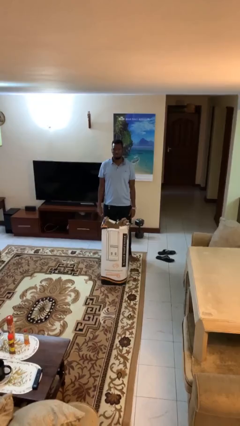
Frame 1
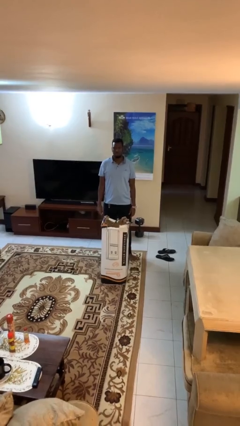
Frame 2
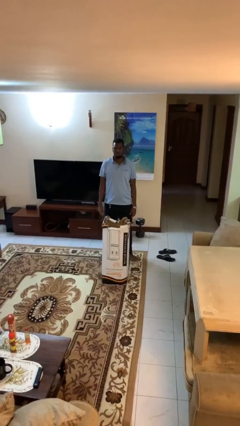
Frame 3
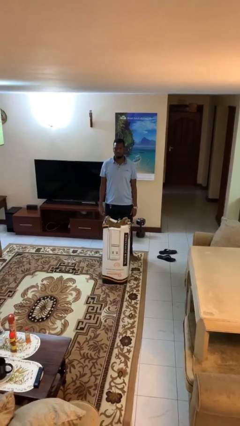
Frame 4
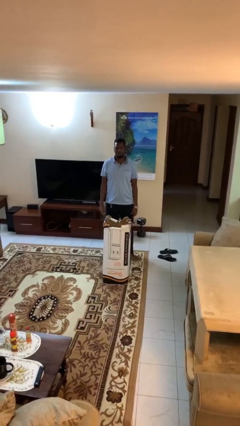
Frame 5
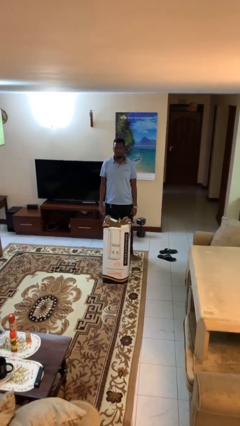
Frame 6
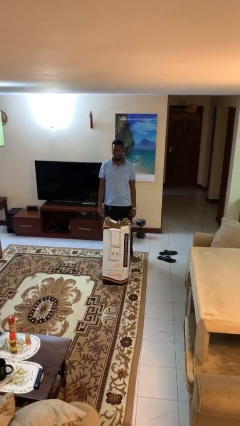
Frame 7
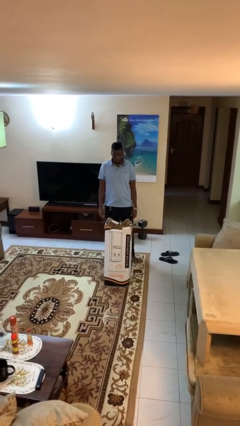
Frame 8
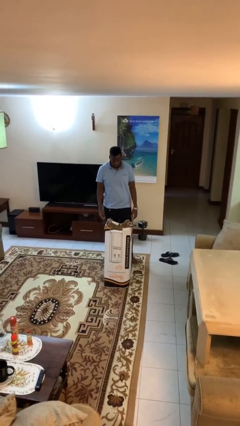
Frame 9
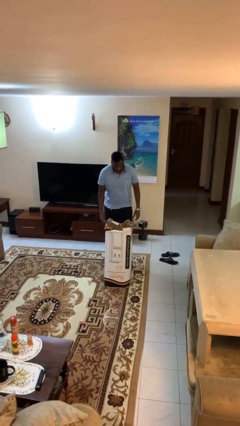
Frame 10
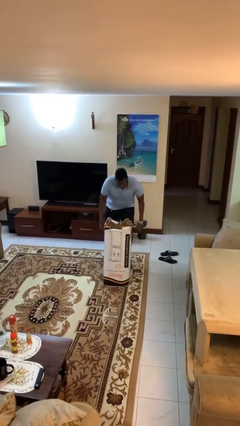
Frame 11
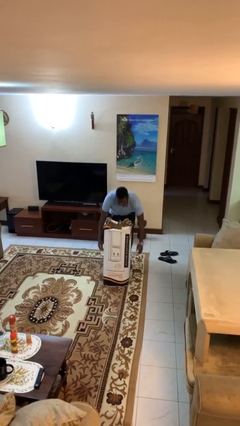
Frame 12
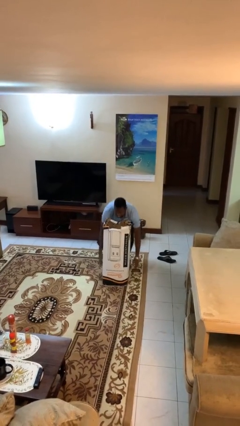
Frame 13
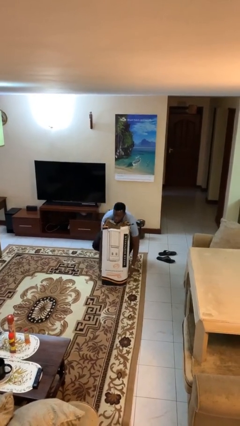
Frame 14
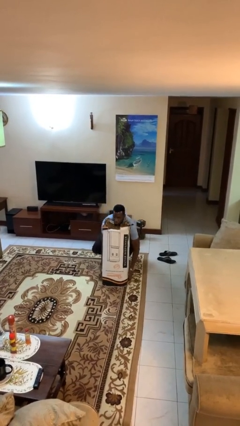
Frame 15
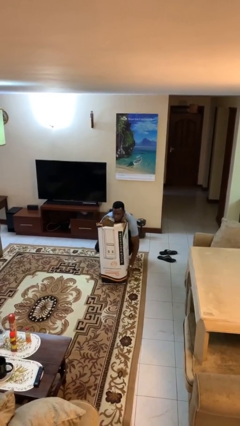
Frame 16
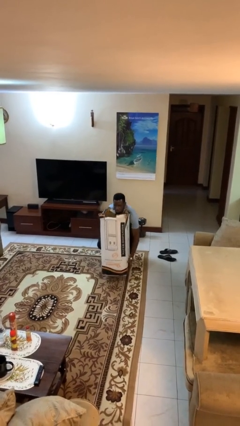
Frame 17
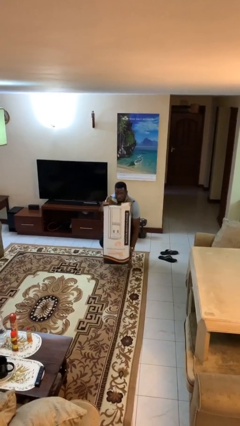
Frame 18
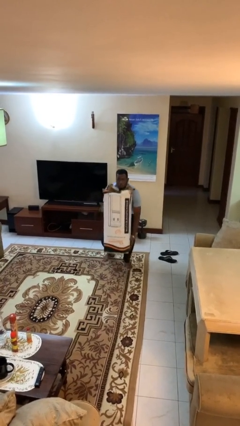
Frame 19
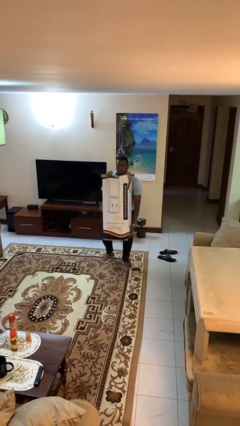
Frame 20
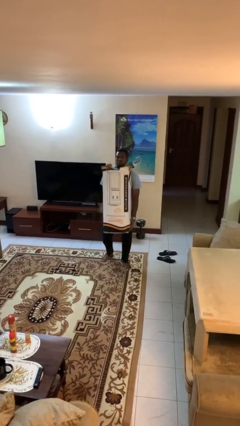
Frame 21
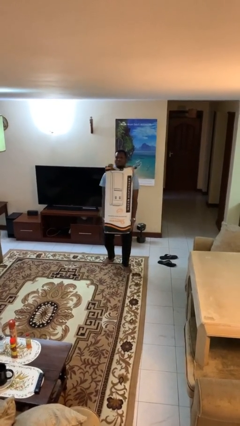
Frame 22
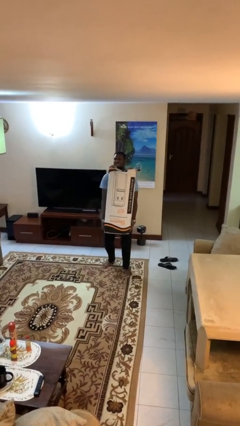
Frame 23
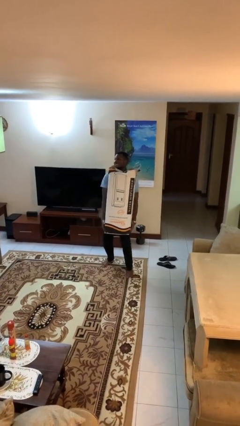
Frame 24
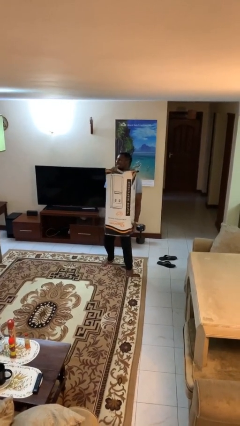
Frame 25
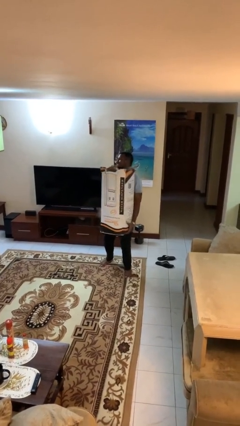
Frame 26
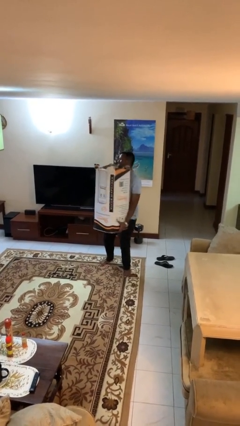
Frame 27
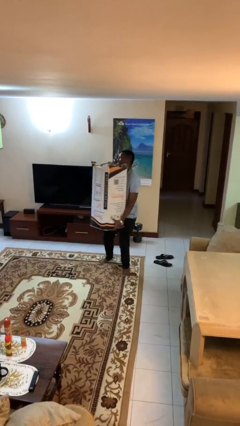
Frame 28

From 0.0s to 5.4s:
person picks up object from floor

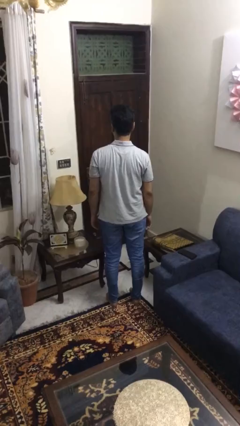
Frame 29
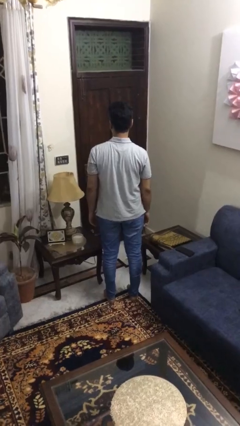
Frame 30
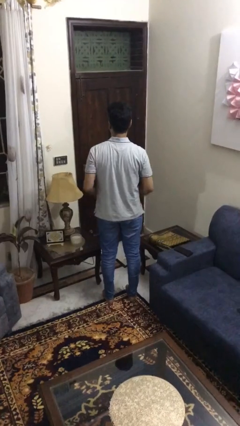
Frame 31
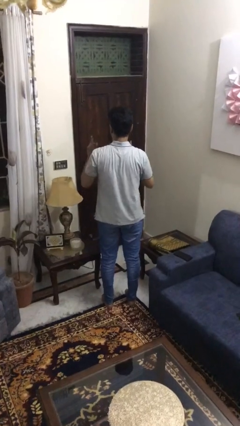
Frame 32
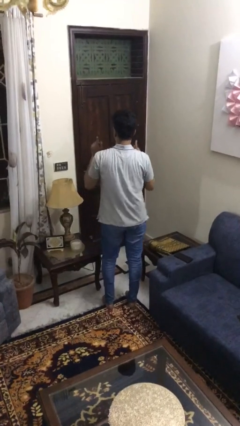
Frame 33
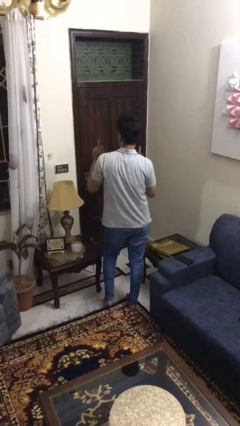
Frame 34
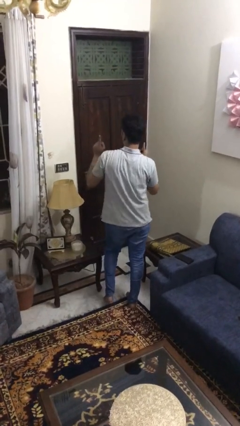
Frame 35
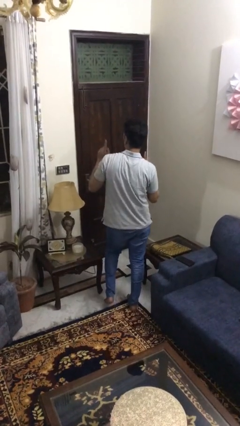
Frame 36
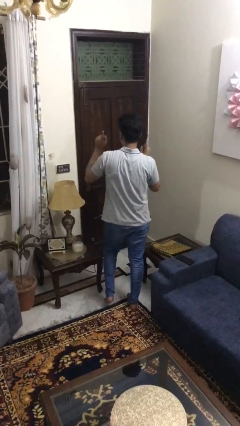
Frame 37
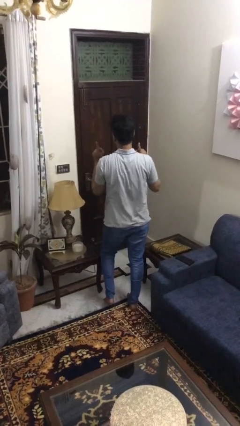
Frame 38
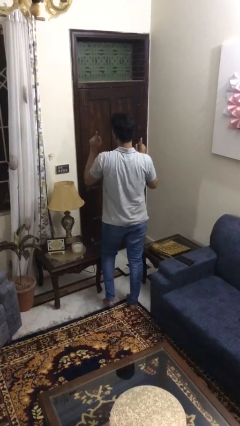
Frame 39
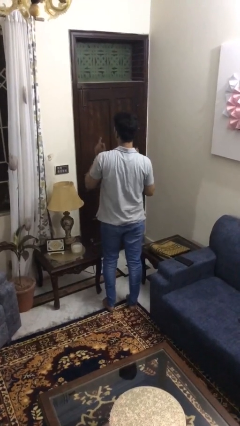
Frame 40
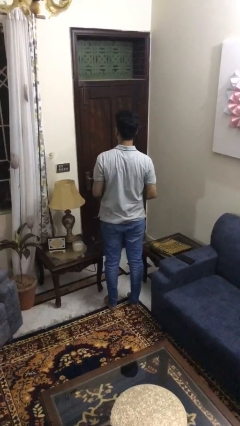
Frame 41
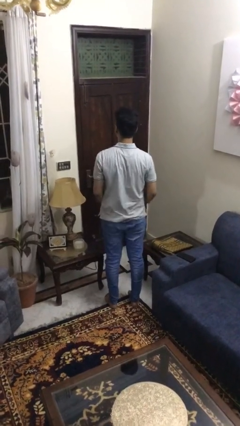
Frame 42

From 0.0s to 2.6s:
person dances in place

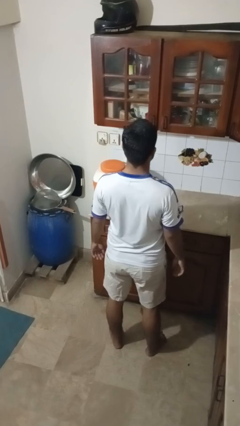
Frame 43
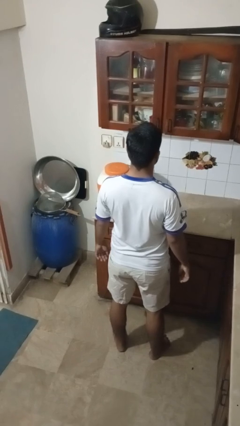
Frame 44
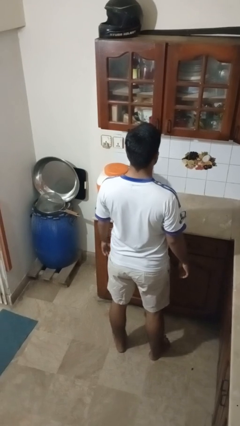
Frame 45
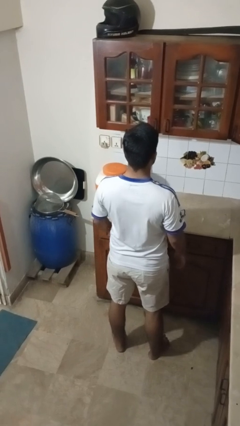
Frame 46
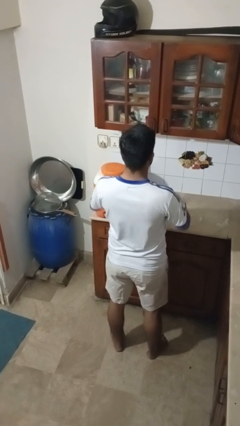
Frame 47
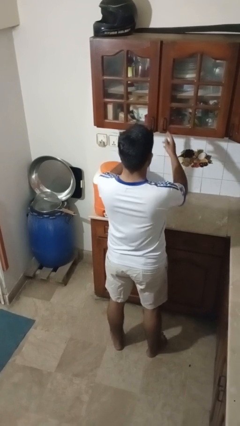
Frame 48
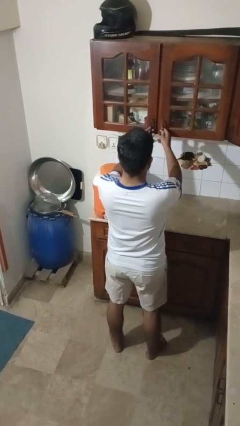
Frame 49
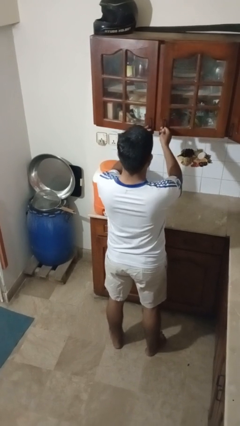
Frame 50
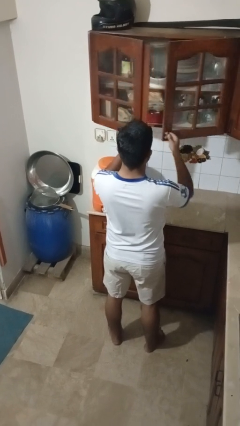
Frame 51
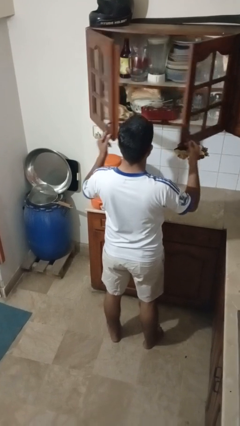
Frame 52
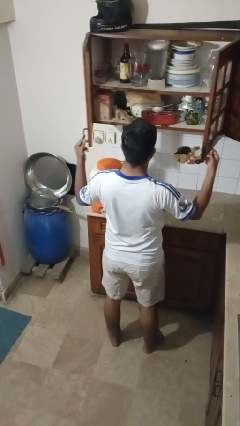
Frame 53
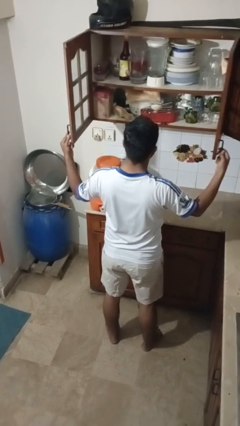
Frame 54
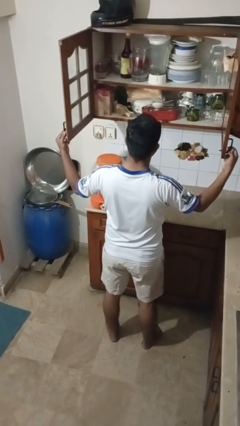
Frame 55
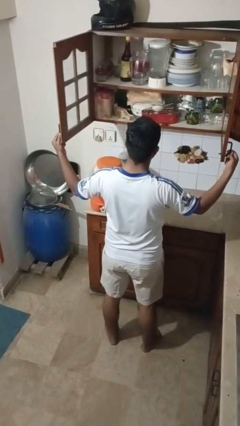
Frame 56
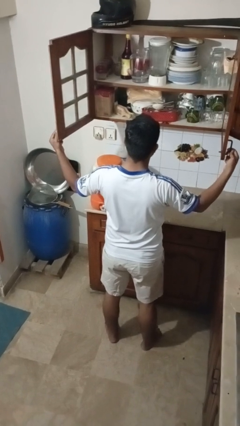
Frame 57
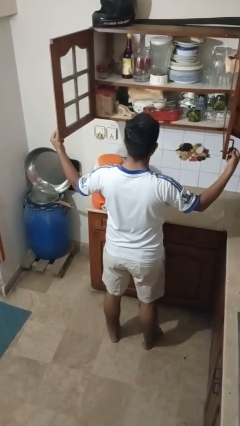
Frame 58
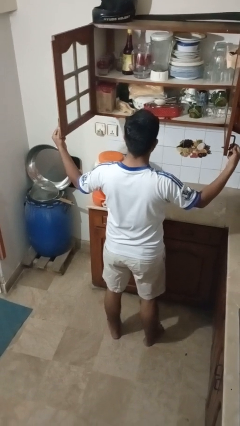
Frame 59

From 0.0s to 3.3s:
person opens cabinet

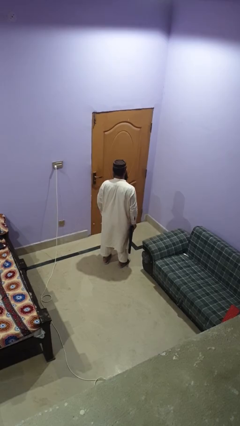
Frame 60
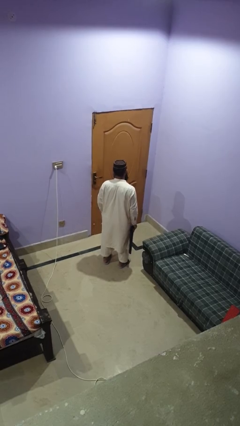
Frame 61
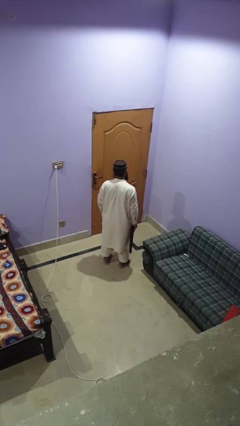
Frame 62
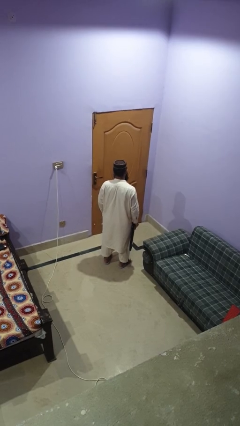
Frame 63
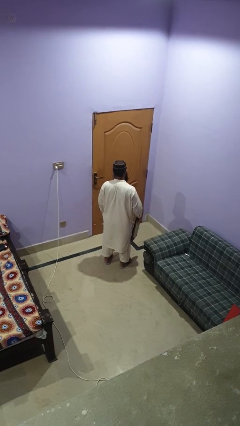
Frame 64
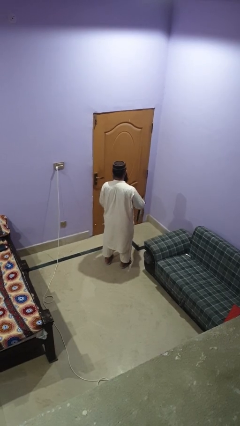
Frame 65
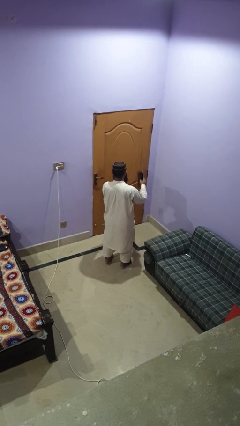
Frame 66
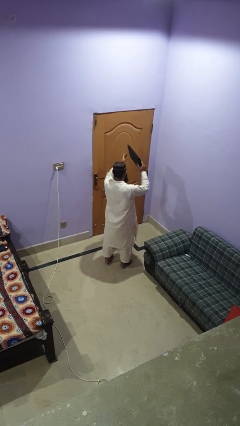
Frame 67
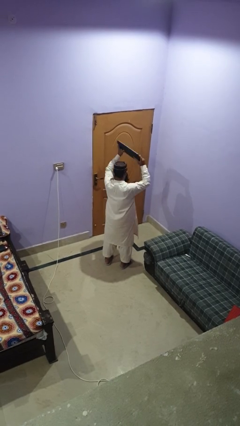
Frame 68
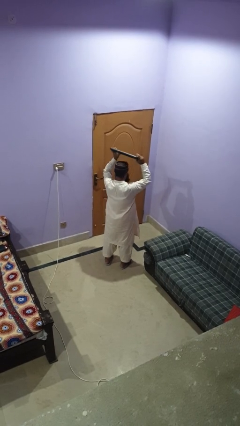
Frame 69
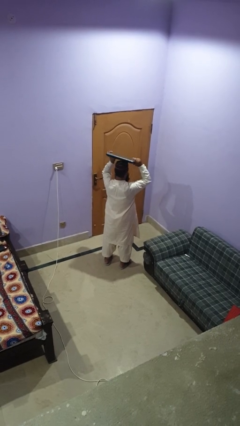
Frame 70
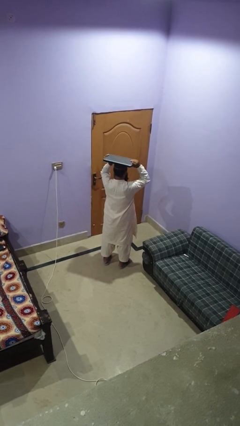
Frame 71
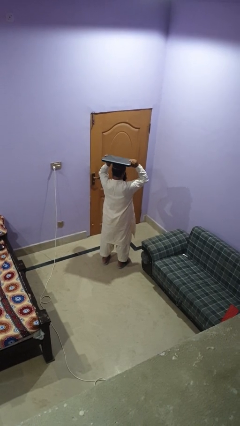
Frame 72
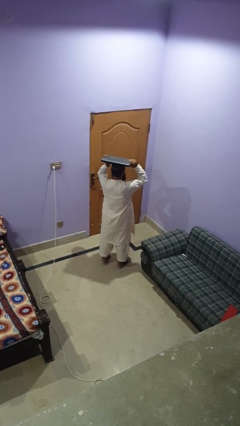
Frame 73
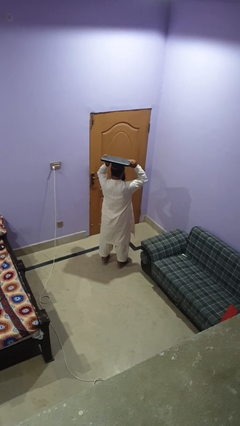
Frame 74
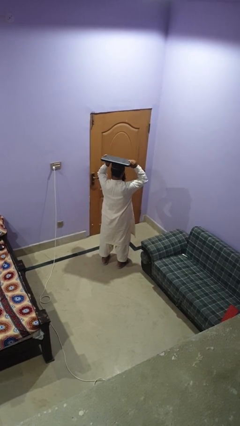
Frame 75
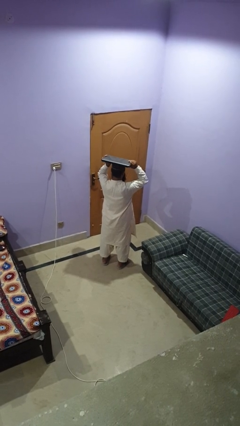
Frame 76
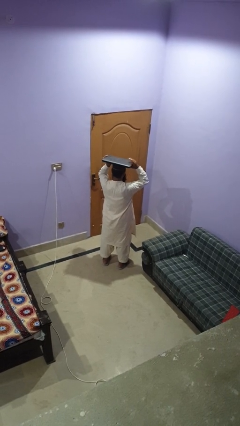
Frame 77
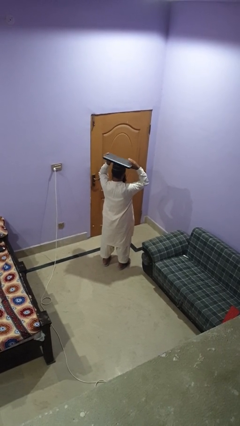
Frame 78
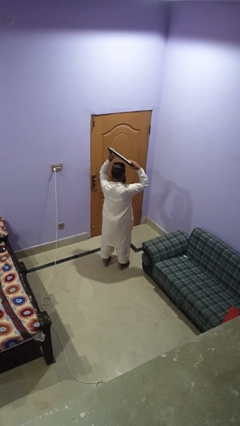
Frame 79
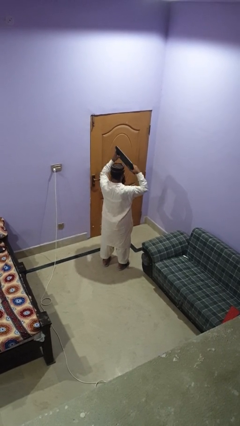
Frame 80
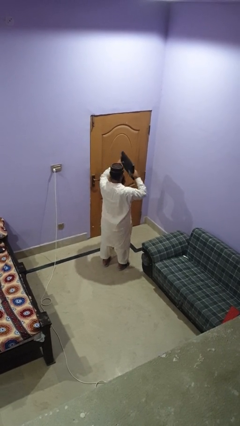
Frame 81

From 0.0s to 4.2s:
person holds object above head

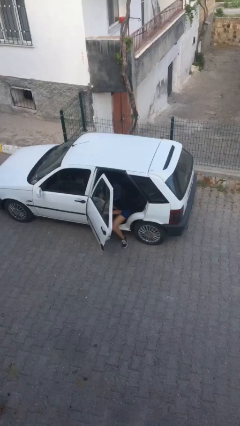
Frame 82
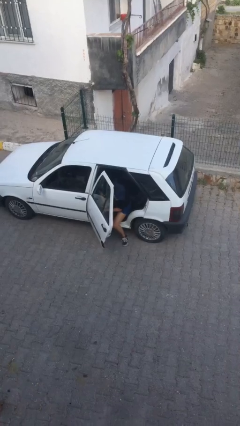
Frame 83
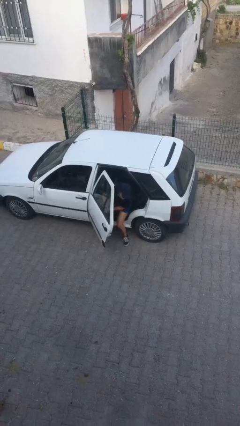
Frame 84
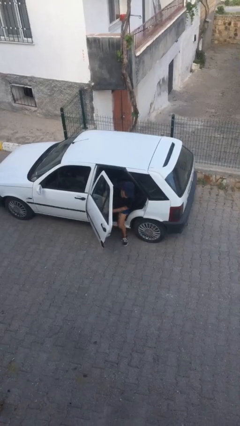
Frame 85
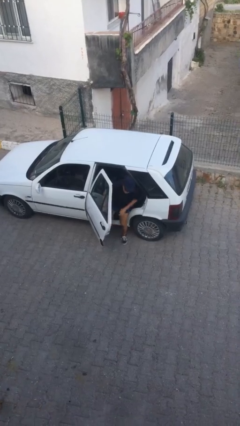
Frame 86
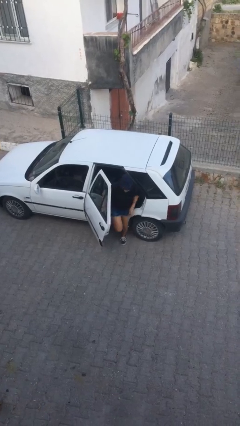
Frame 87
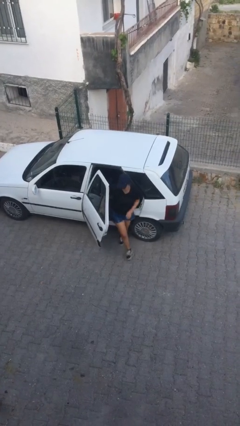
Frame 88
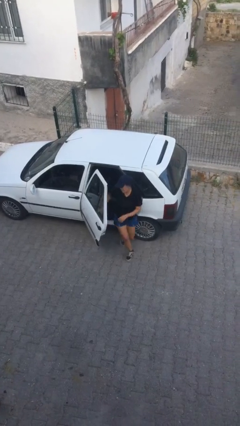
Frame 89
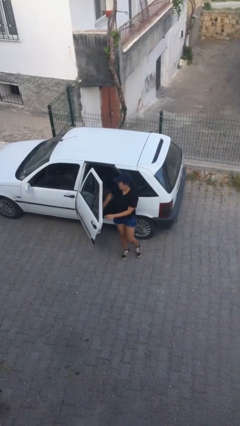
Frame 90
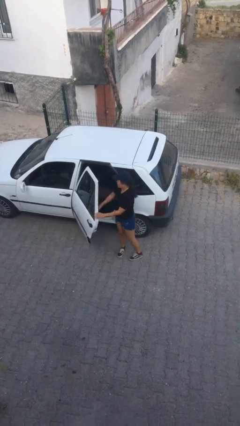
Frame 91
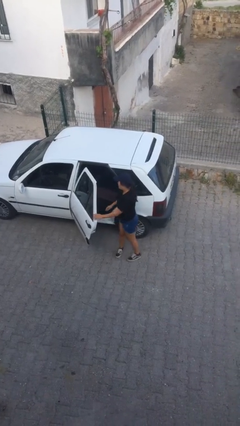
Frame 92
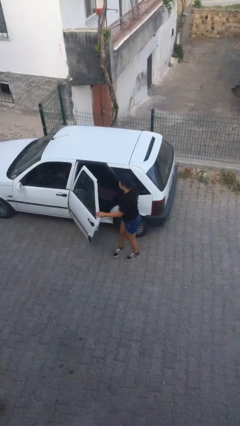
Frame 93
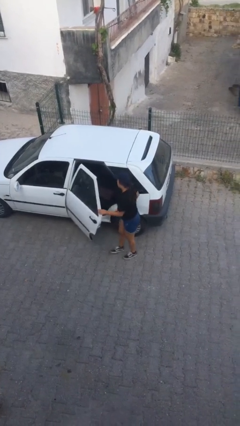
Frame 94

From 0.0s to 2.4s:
person exits car
